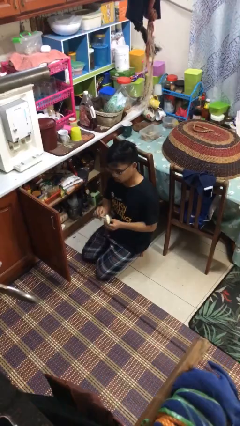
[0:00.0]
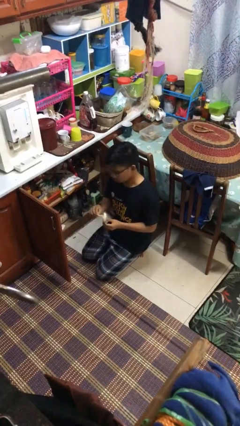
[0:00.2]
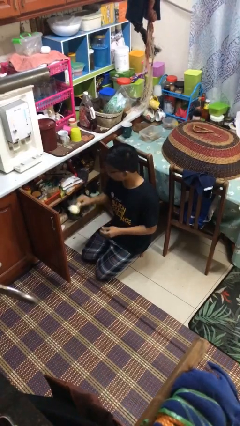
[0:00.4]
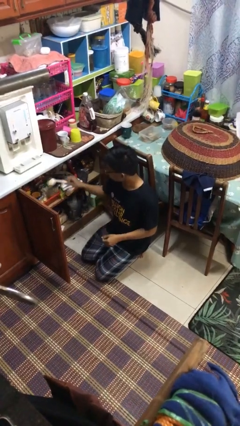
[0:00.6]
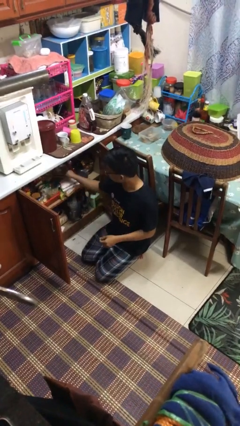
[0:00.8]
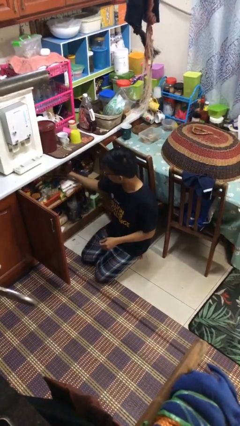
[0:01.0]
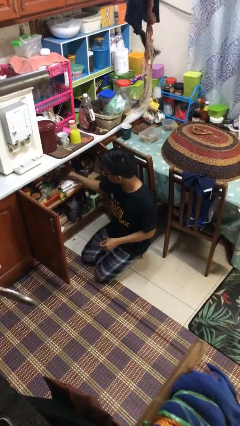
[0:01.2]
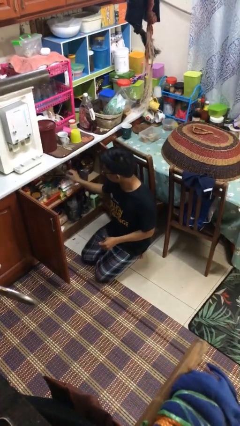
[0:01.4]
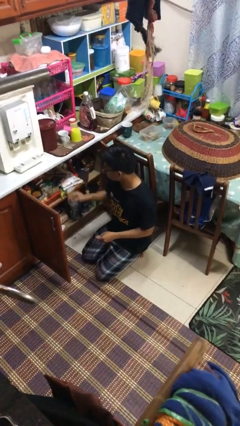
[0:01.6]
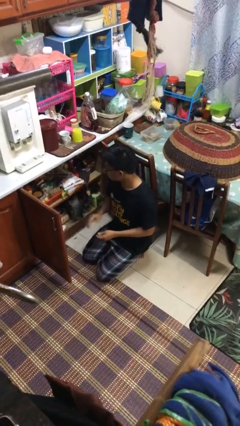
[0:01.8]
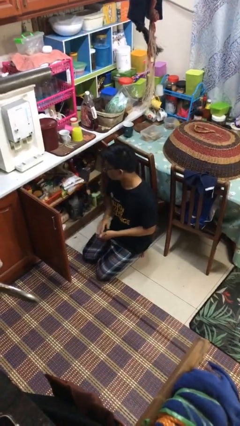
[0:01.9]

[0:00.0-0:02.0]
person puts object into kitchen drawer

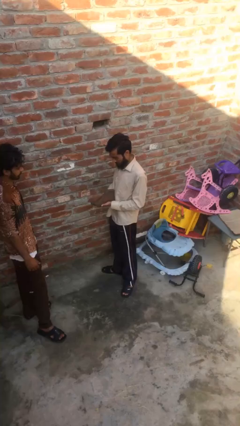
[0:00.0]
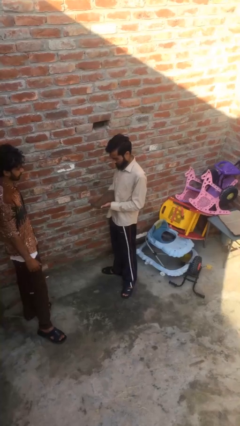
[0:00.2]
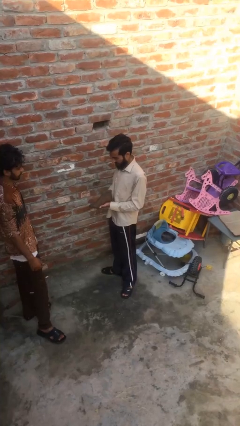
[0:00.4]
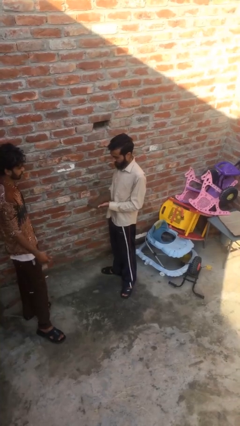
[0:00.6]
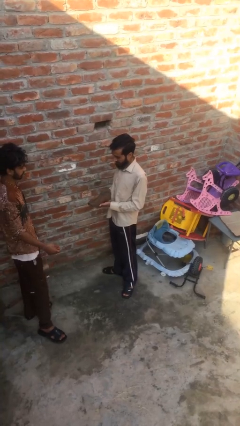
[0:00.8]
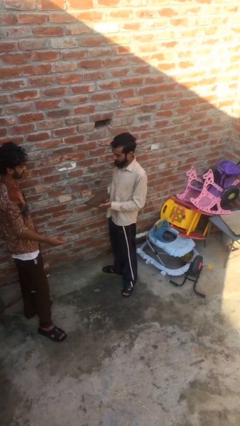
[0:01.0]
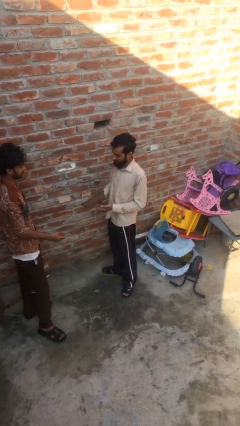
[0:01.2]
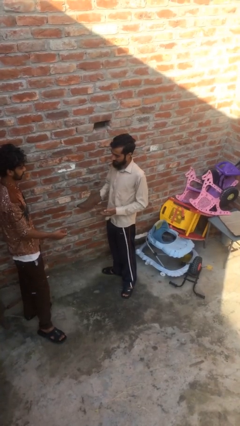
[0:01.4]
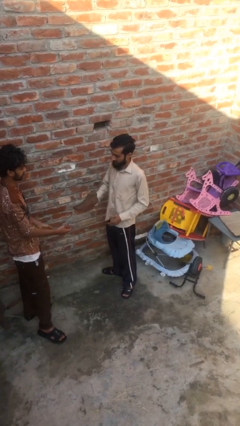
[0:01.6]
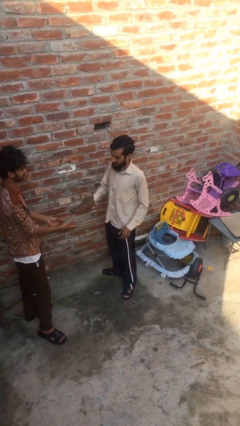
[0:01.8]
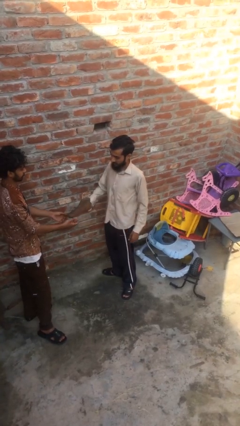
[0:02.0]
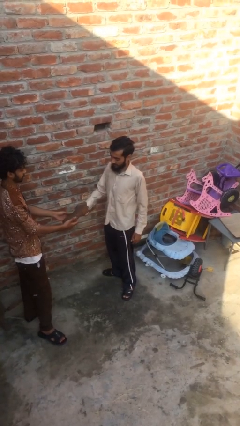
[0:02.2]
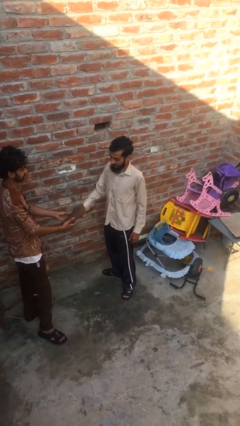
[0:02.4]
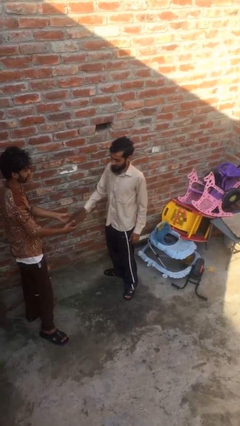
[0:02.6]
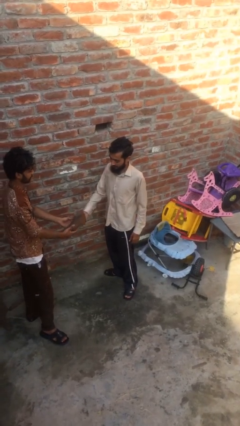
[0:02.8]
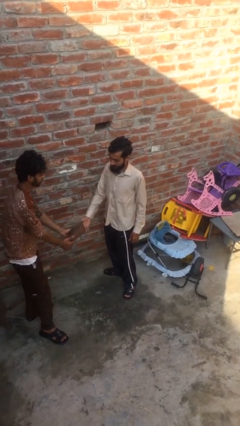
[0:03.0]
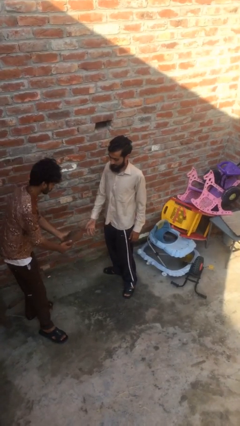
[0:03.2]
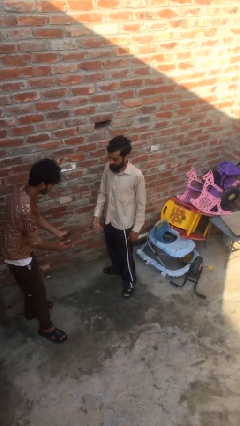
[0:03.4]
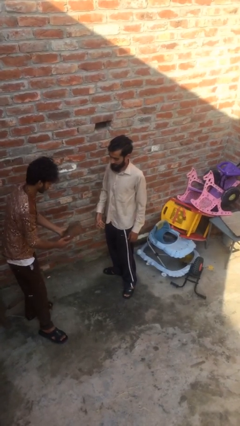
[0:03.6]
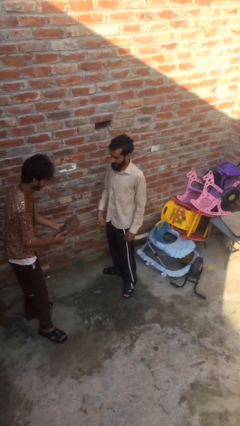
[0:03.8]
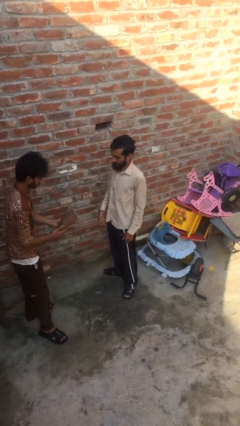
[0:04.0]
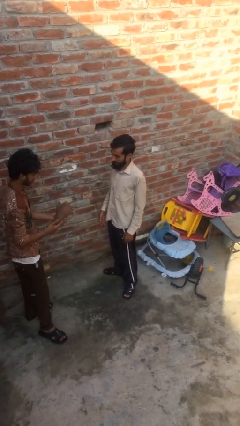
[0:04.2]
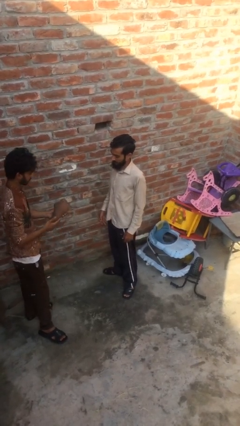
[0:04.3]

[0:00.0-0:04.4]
person transfers object to person

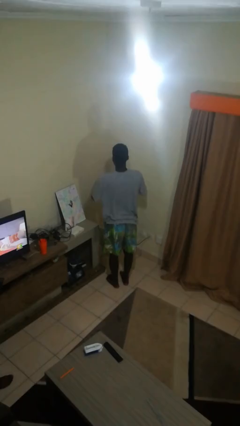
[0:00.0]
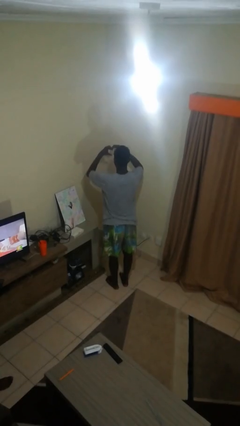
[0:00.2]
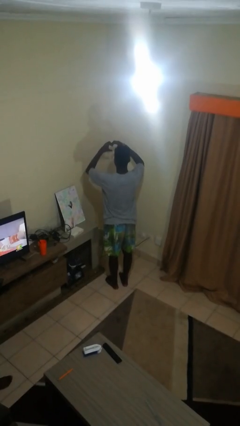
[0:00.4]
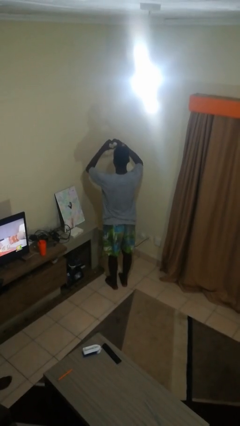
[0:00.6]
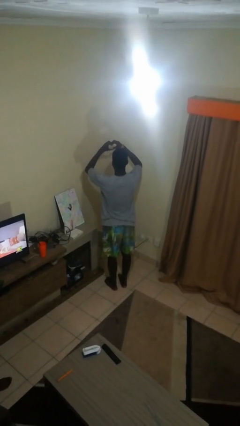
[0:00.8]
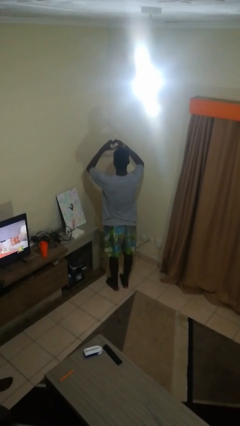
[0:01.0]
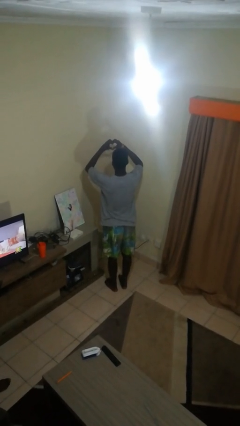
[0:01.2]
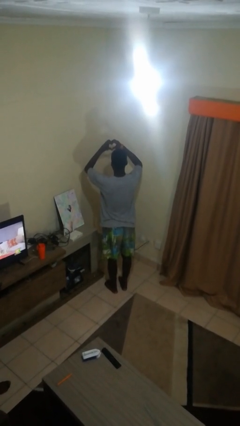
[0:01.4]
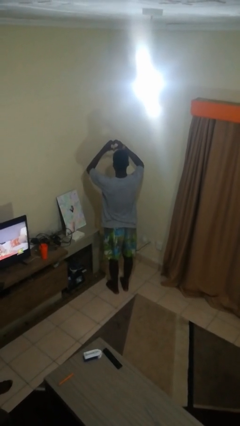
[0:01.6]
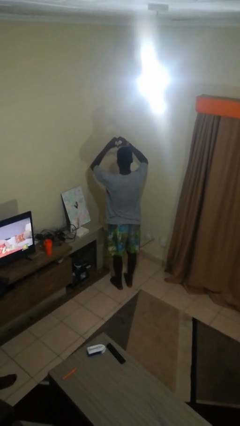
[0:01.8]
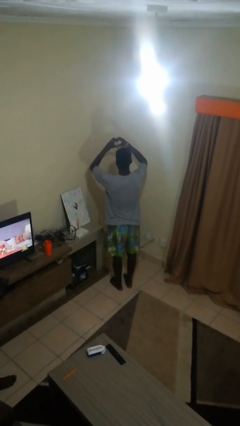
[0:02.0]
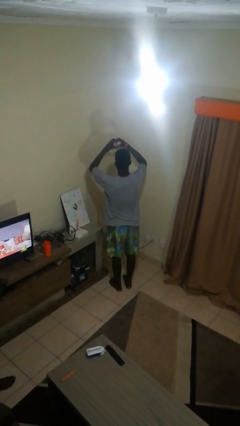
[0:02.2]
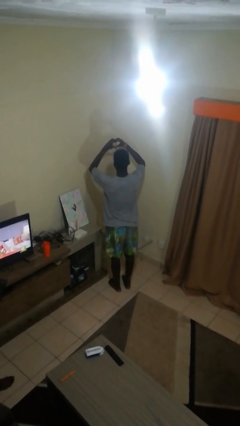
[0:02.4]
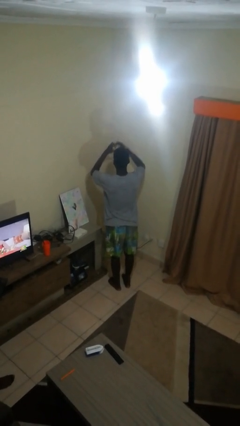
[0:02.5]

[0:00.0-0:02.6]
person gestures heart

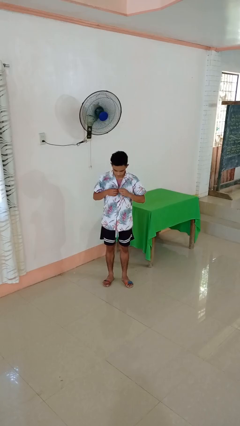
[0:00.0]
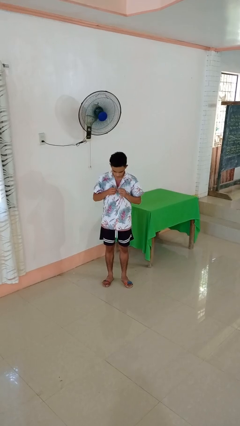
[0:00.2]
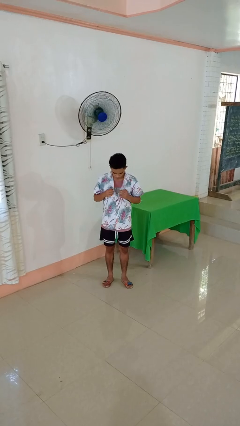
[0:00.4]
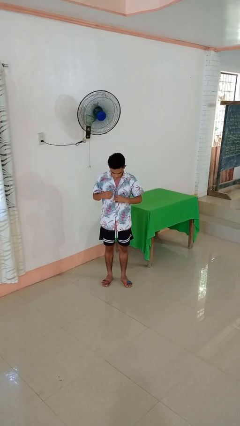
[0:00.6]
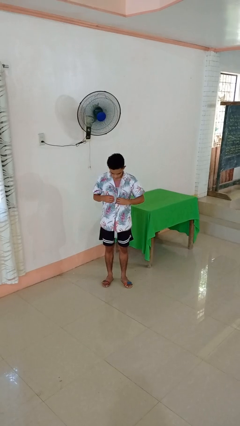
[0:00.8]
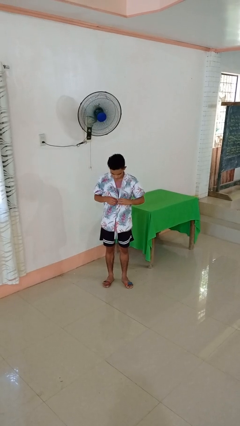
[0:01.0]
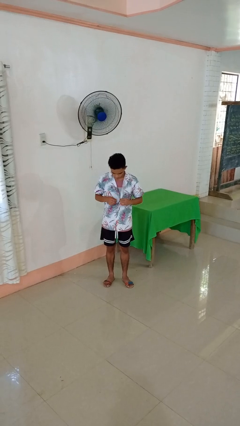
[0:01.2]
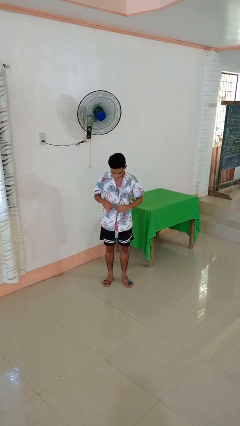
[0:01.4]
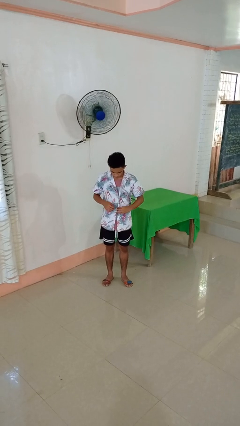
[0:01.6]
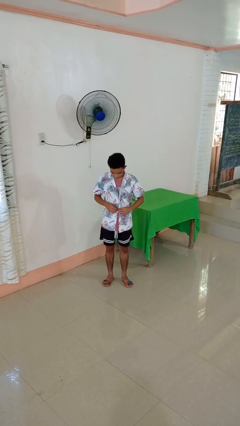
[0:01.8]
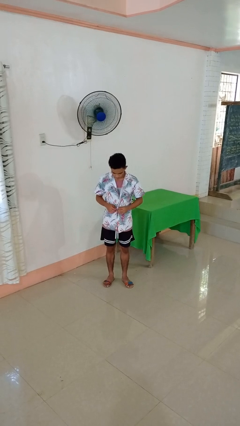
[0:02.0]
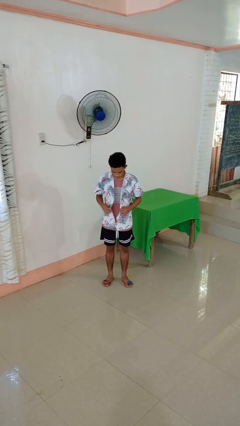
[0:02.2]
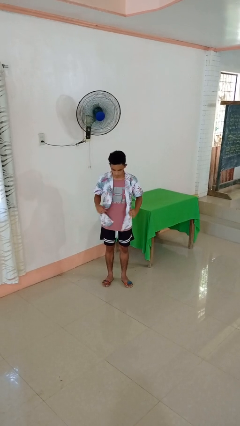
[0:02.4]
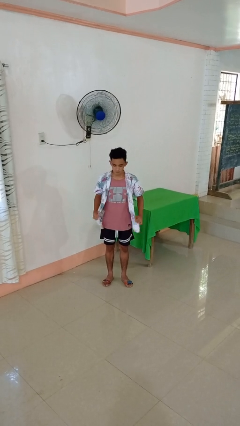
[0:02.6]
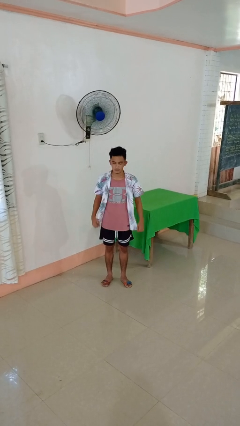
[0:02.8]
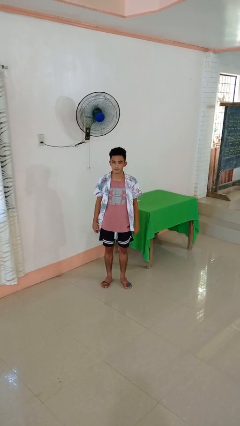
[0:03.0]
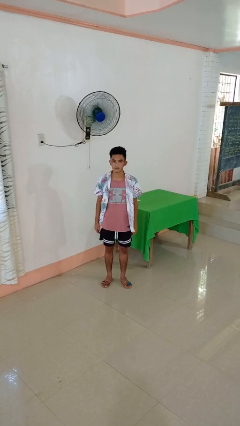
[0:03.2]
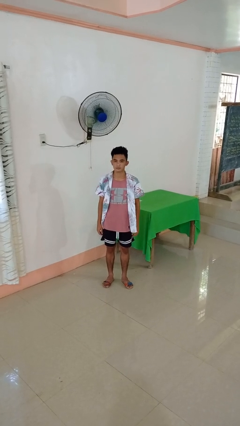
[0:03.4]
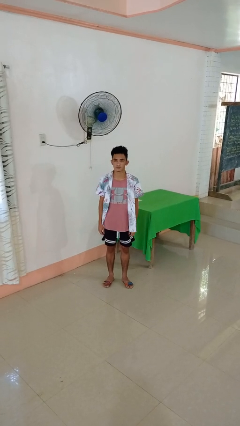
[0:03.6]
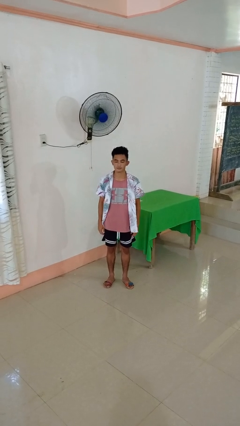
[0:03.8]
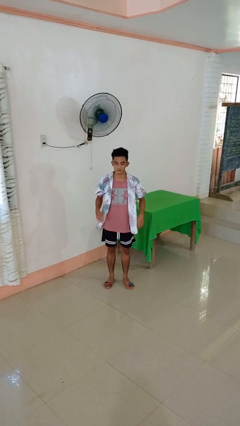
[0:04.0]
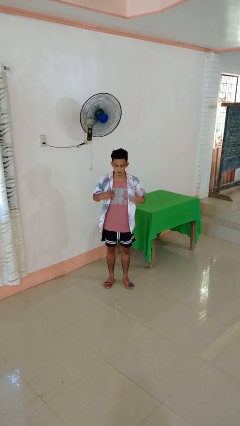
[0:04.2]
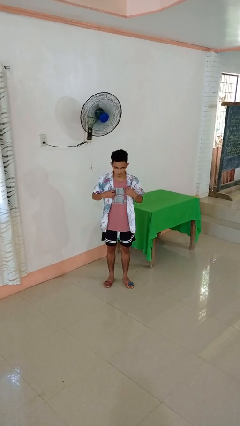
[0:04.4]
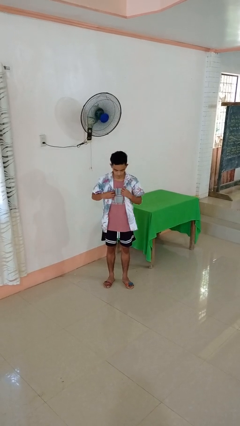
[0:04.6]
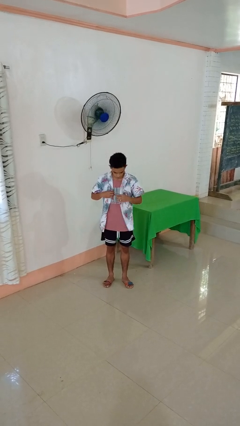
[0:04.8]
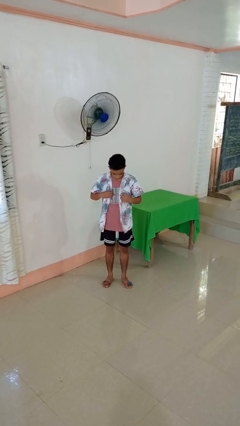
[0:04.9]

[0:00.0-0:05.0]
person unbuttons shirt

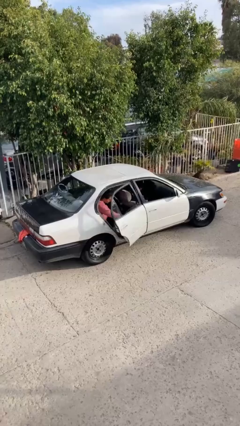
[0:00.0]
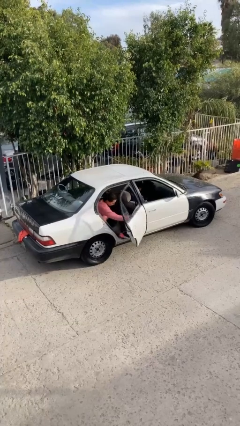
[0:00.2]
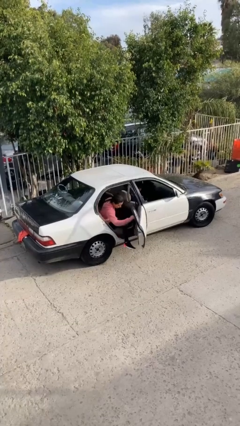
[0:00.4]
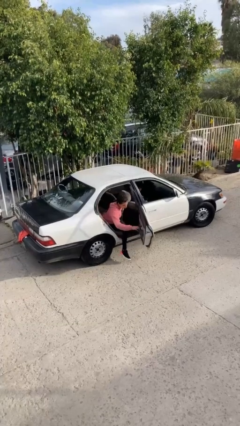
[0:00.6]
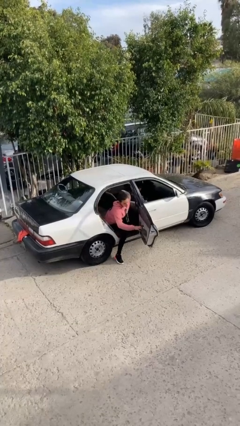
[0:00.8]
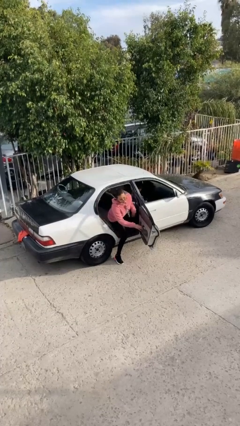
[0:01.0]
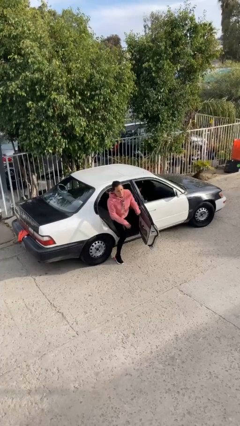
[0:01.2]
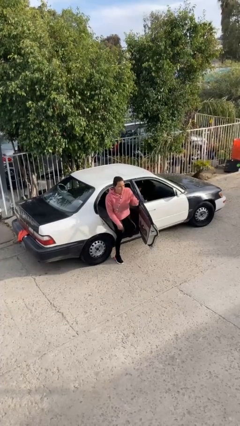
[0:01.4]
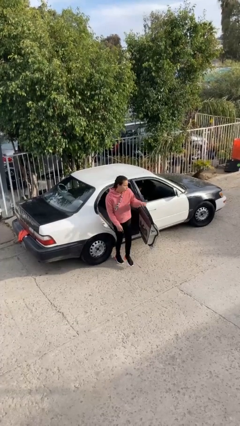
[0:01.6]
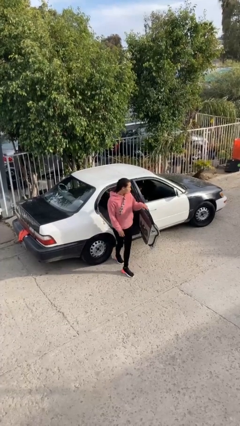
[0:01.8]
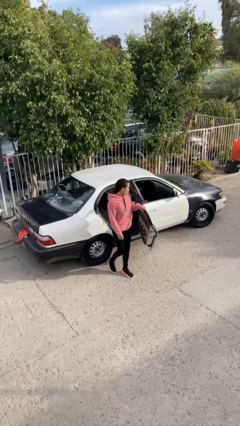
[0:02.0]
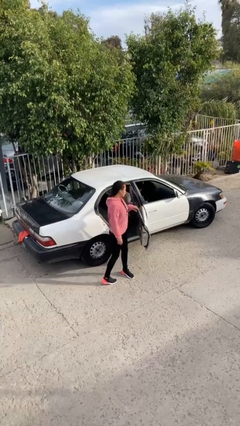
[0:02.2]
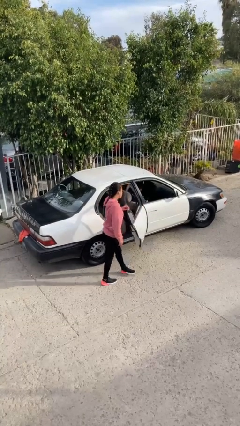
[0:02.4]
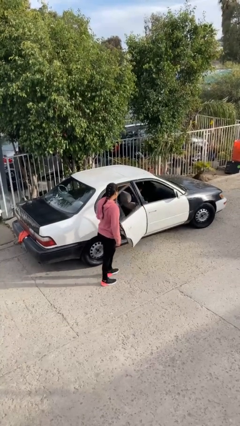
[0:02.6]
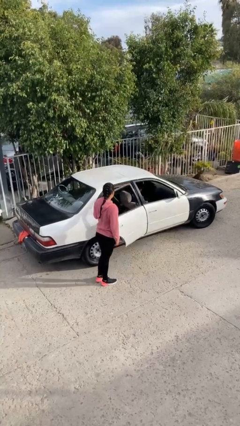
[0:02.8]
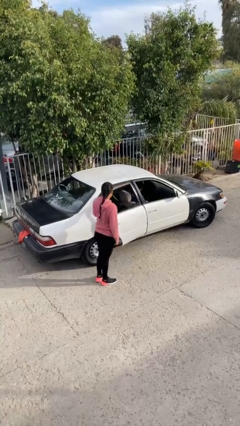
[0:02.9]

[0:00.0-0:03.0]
car drops off person

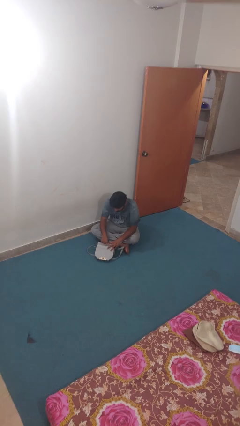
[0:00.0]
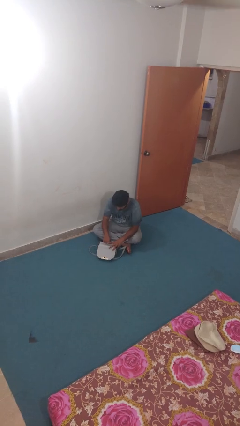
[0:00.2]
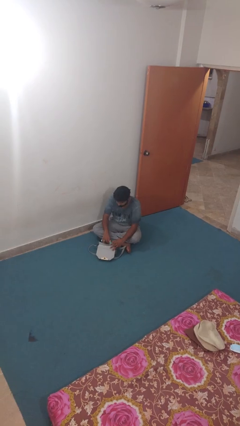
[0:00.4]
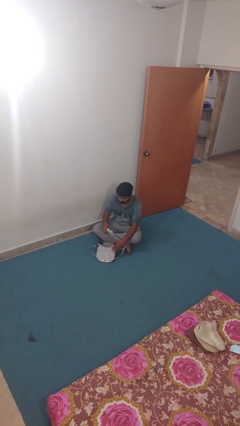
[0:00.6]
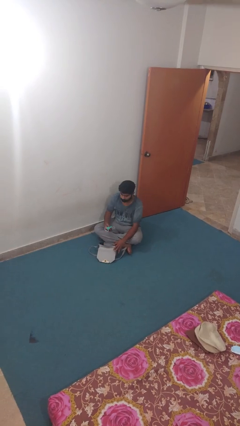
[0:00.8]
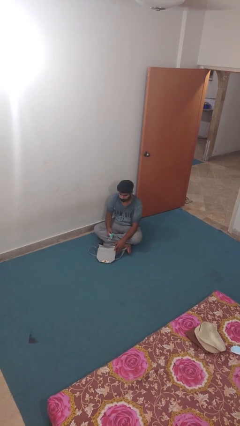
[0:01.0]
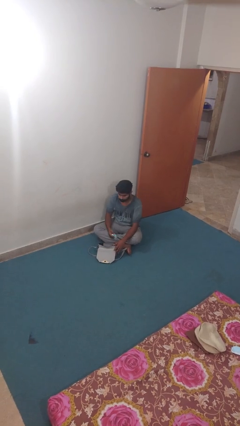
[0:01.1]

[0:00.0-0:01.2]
person takes object from purse
